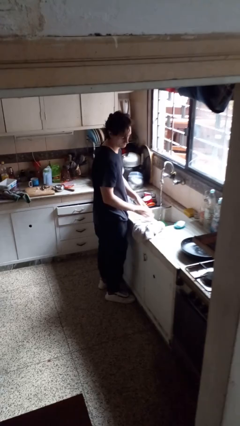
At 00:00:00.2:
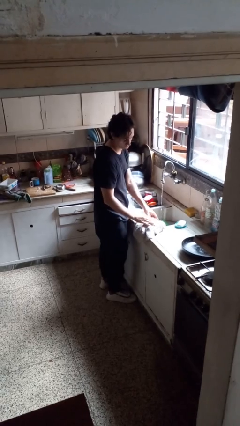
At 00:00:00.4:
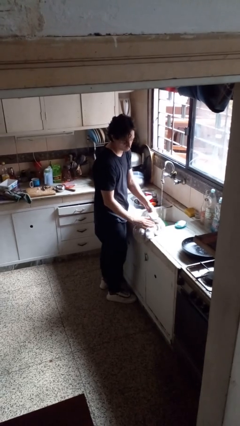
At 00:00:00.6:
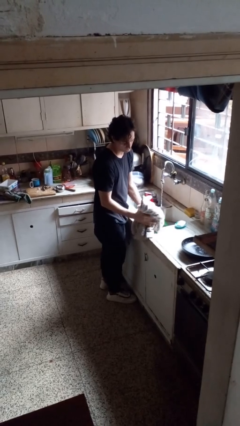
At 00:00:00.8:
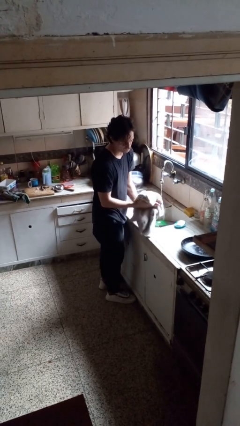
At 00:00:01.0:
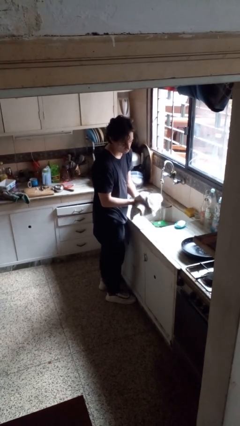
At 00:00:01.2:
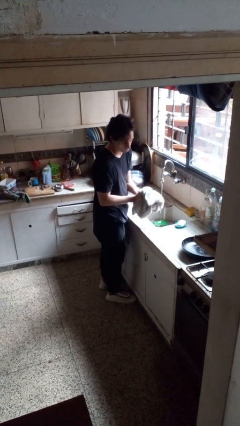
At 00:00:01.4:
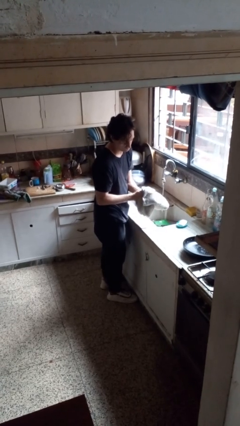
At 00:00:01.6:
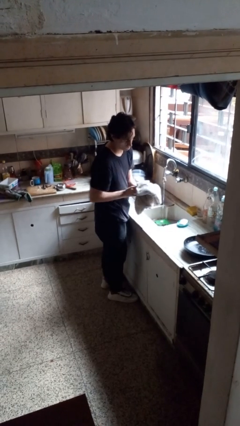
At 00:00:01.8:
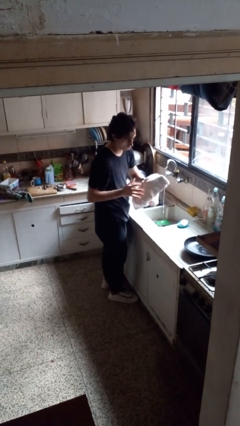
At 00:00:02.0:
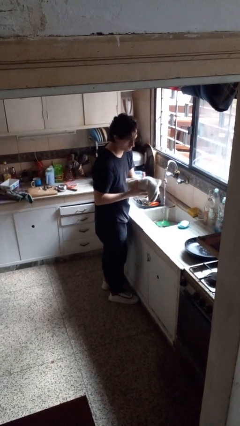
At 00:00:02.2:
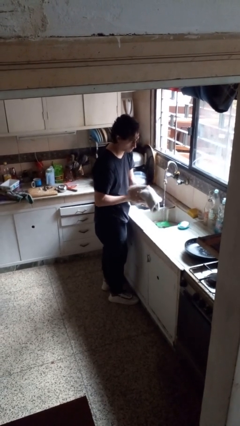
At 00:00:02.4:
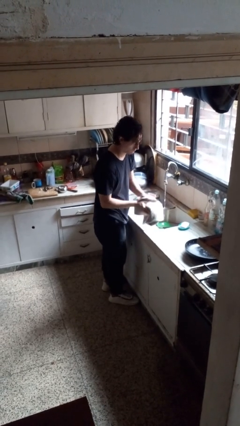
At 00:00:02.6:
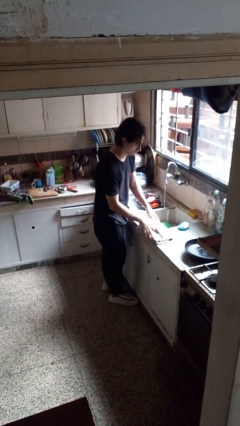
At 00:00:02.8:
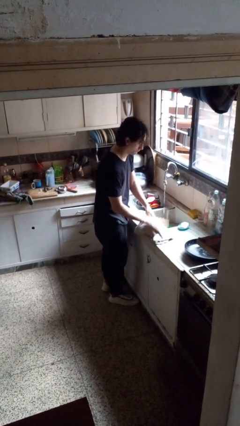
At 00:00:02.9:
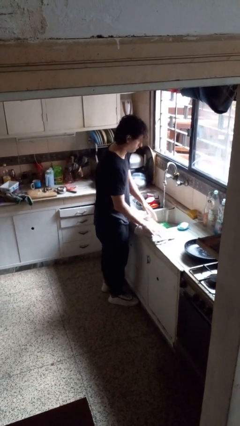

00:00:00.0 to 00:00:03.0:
person dries hands with towel

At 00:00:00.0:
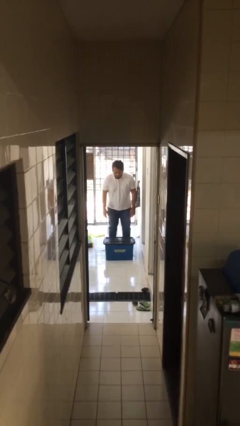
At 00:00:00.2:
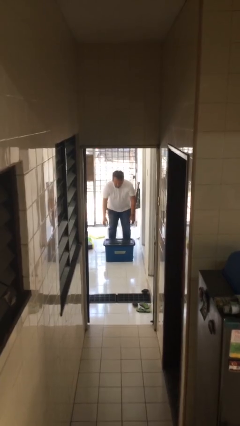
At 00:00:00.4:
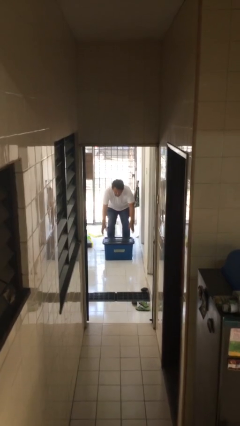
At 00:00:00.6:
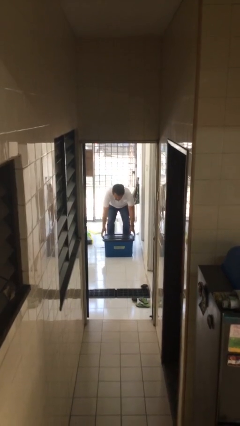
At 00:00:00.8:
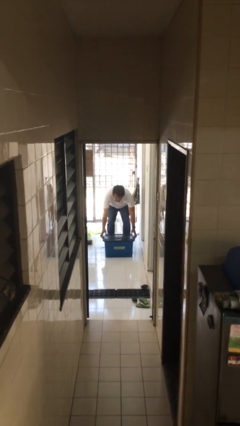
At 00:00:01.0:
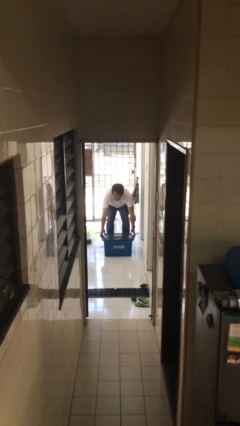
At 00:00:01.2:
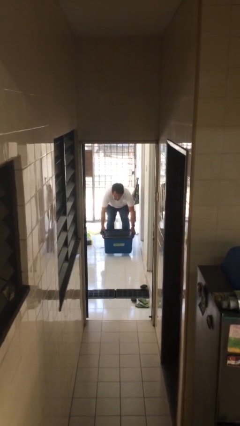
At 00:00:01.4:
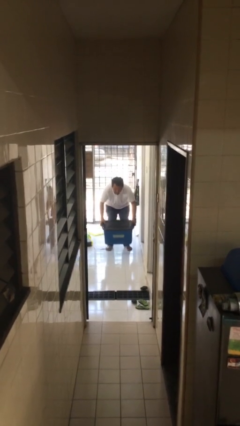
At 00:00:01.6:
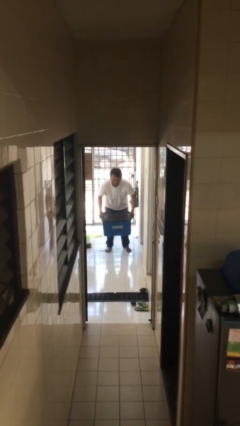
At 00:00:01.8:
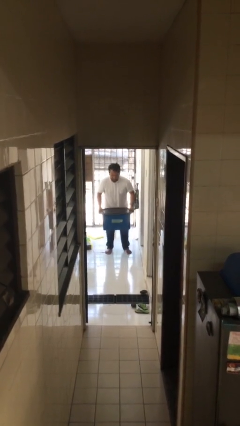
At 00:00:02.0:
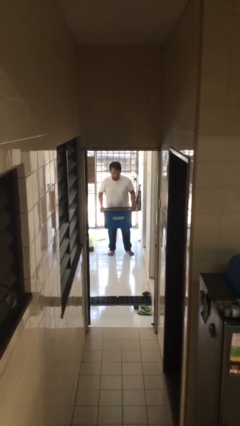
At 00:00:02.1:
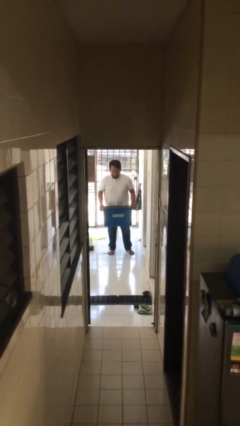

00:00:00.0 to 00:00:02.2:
person picks up object from floor

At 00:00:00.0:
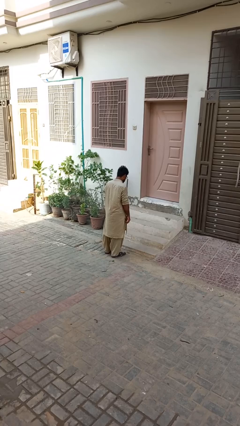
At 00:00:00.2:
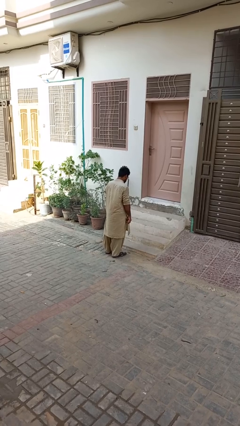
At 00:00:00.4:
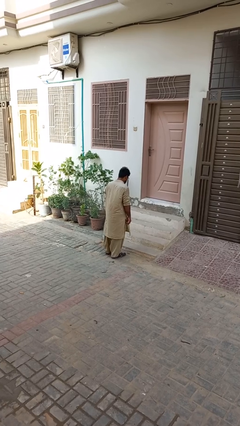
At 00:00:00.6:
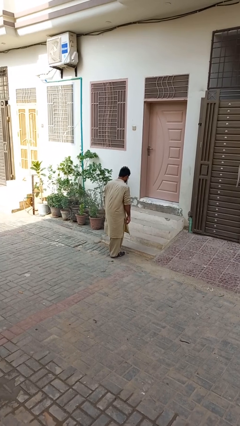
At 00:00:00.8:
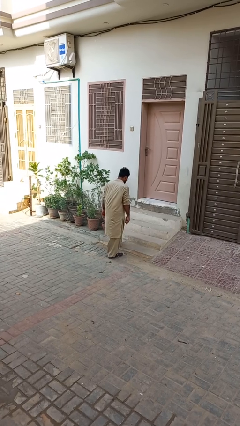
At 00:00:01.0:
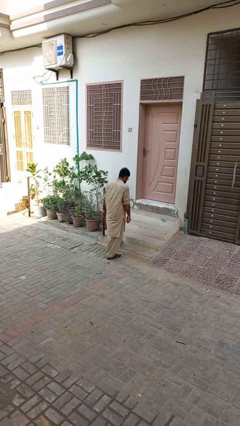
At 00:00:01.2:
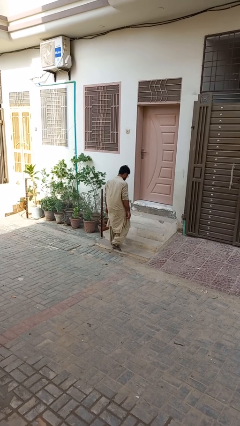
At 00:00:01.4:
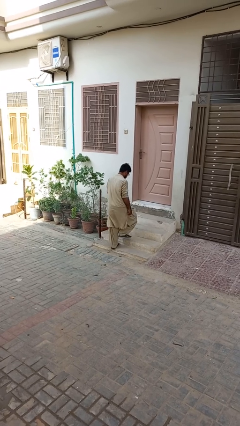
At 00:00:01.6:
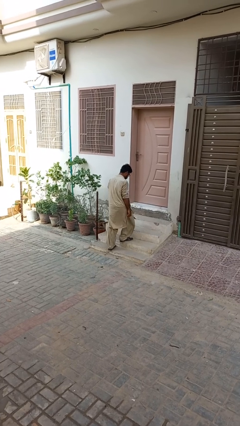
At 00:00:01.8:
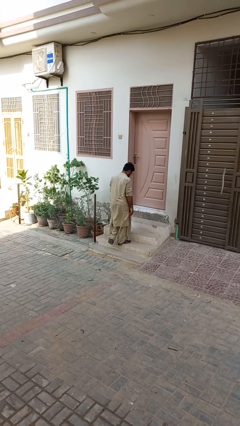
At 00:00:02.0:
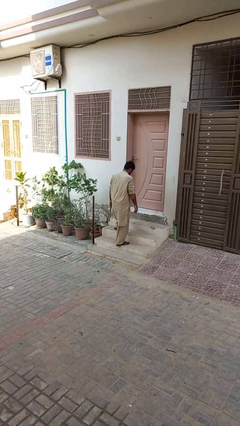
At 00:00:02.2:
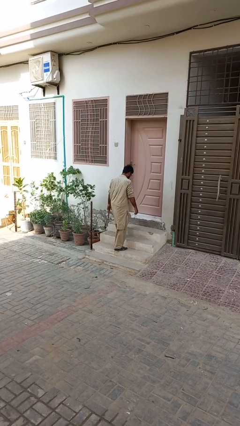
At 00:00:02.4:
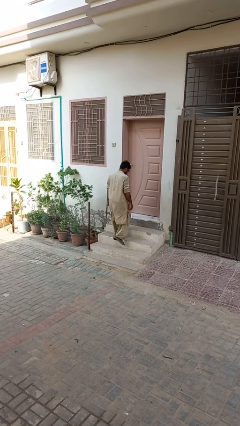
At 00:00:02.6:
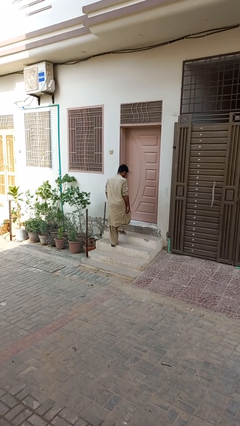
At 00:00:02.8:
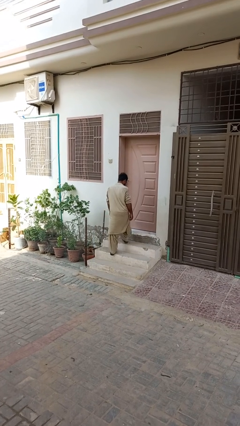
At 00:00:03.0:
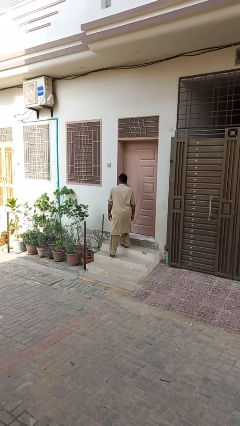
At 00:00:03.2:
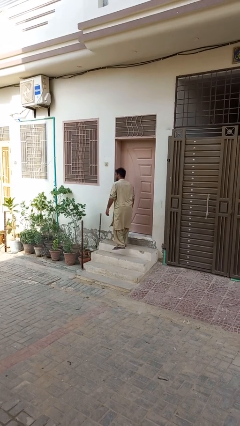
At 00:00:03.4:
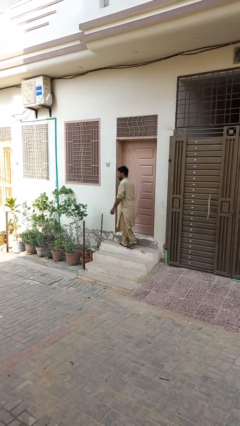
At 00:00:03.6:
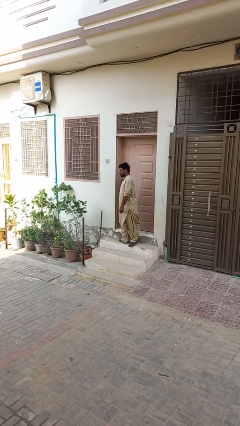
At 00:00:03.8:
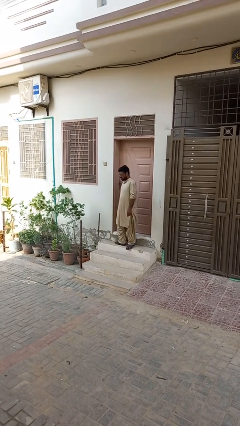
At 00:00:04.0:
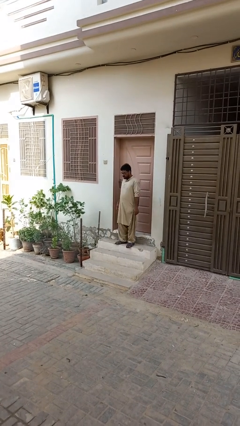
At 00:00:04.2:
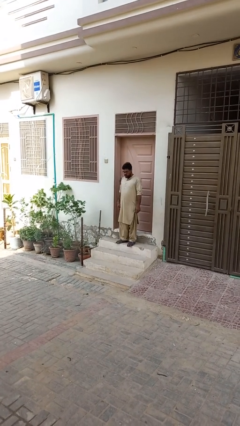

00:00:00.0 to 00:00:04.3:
person climbs up stairs

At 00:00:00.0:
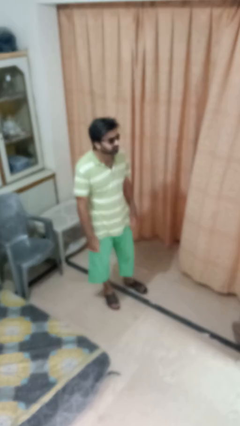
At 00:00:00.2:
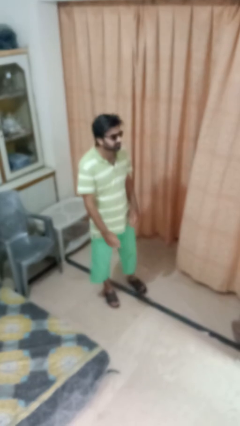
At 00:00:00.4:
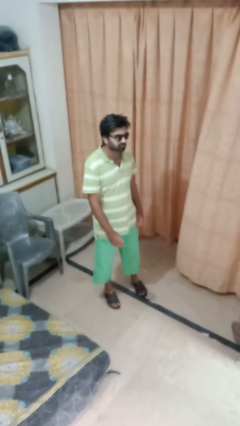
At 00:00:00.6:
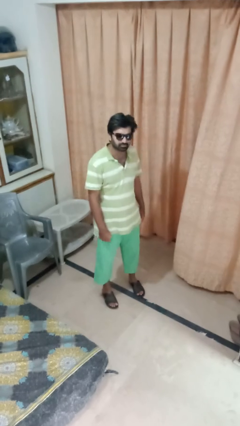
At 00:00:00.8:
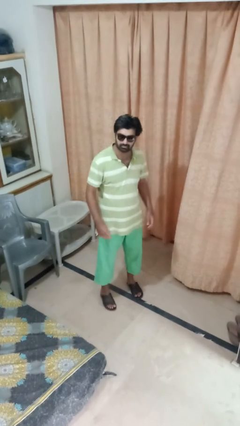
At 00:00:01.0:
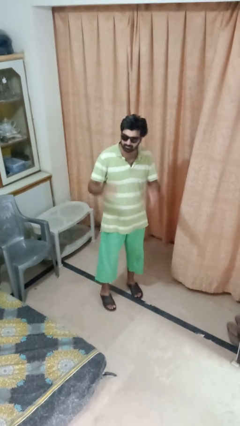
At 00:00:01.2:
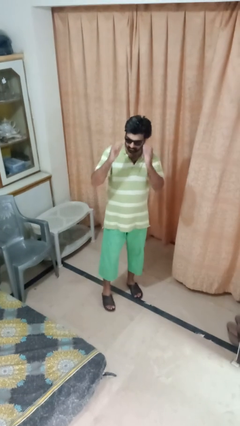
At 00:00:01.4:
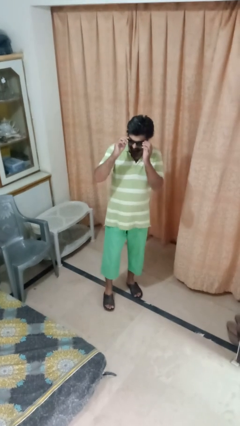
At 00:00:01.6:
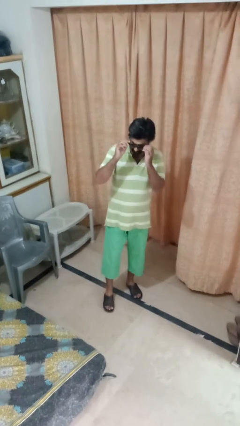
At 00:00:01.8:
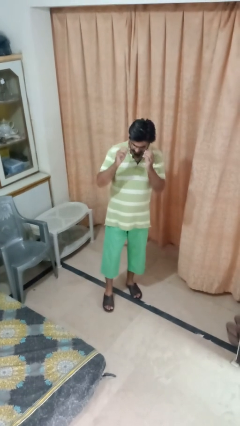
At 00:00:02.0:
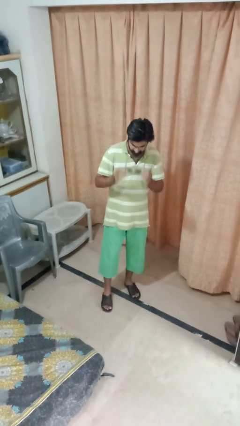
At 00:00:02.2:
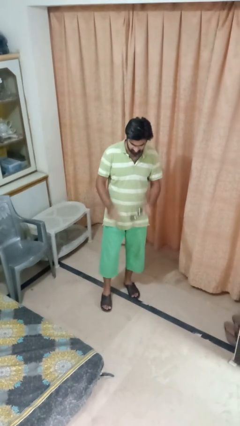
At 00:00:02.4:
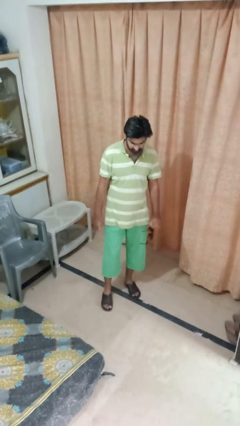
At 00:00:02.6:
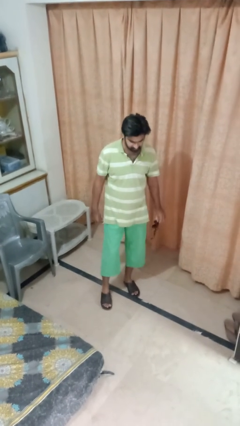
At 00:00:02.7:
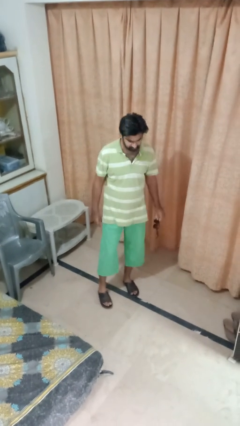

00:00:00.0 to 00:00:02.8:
person takes off sunglasses

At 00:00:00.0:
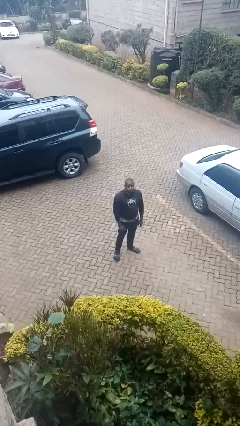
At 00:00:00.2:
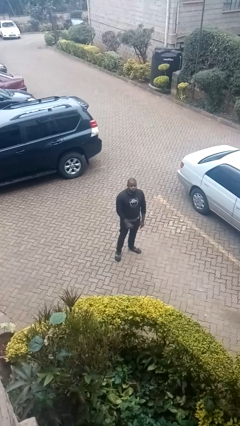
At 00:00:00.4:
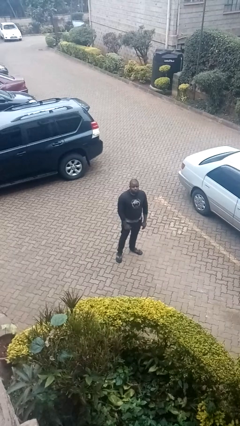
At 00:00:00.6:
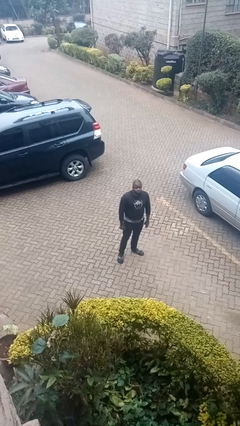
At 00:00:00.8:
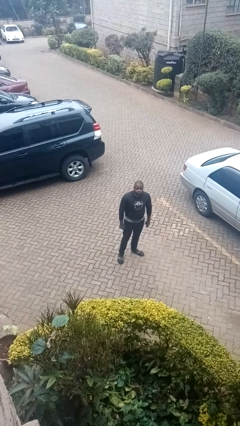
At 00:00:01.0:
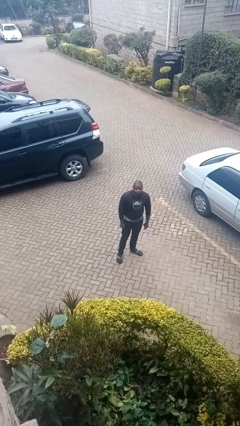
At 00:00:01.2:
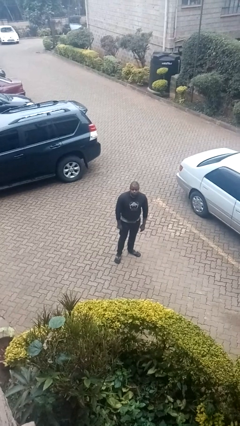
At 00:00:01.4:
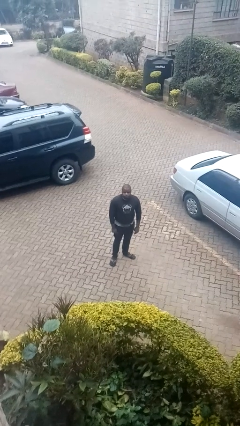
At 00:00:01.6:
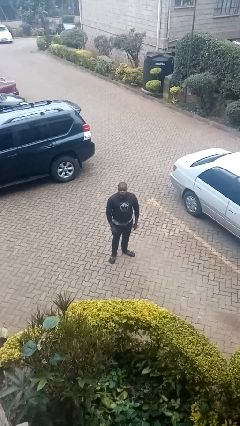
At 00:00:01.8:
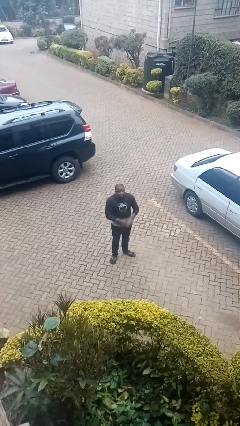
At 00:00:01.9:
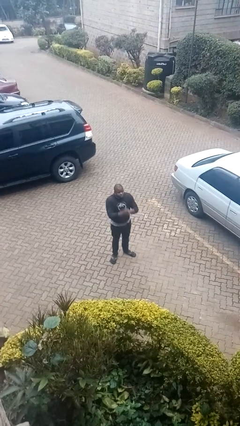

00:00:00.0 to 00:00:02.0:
person blows into hands

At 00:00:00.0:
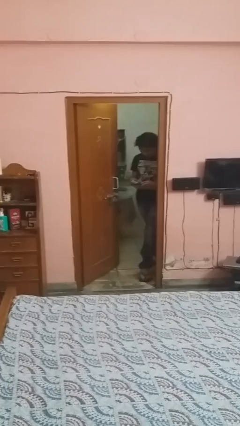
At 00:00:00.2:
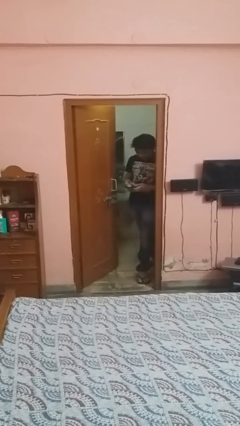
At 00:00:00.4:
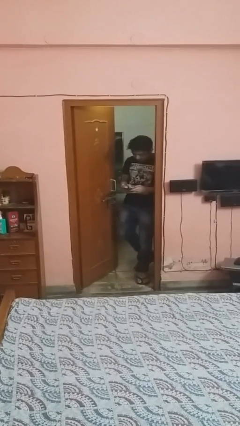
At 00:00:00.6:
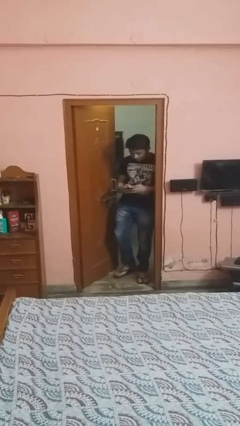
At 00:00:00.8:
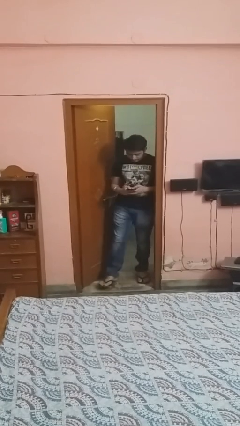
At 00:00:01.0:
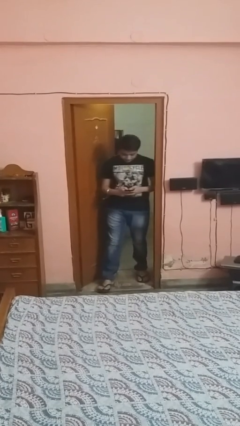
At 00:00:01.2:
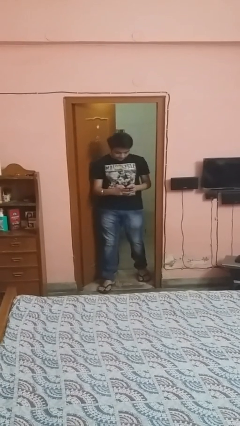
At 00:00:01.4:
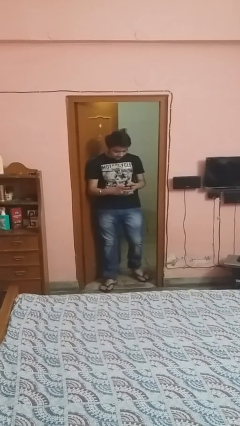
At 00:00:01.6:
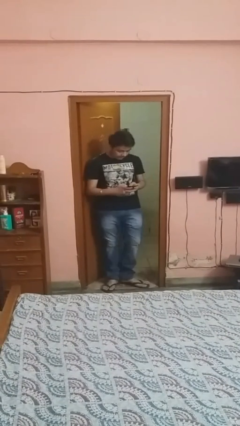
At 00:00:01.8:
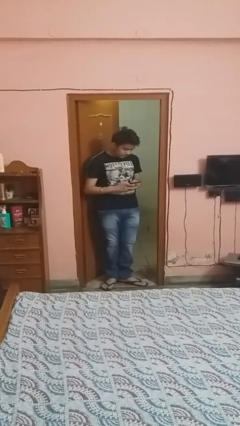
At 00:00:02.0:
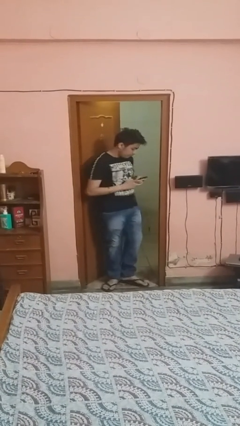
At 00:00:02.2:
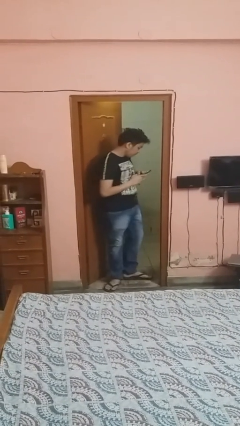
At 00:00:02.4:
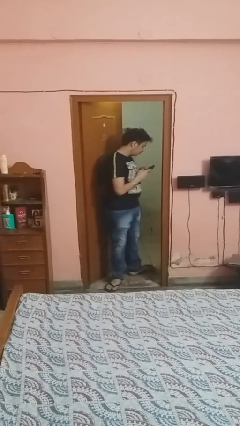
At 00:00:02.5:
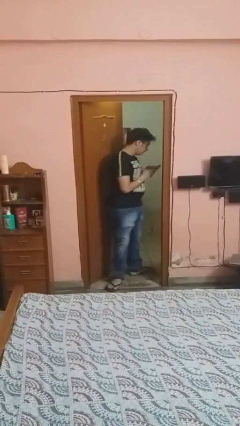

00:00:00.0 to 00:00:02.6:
person enters scene through structure

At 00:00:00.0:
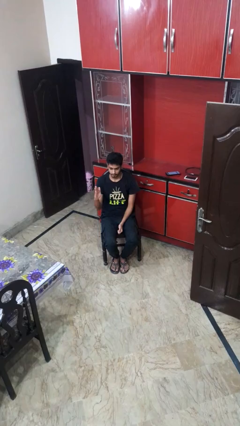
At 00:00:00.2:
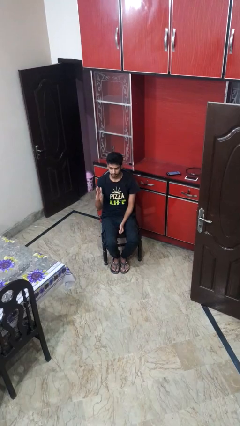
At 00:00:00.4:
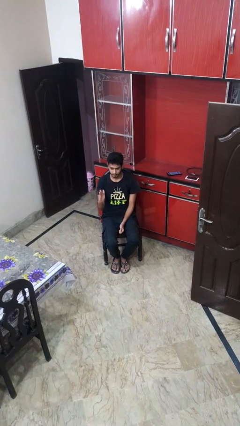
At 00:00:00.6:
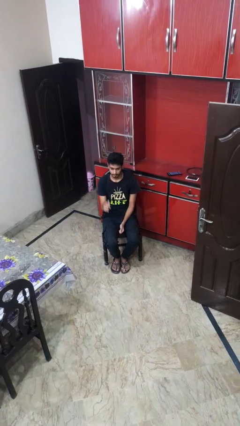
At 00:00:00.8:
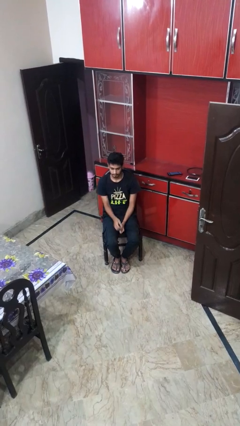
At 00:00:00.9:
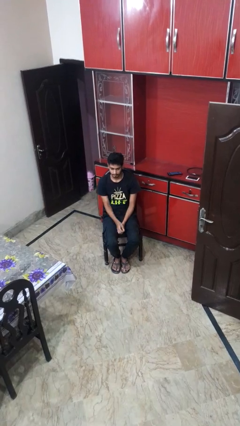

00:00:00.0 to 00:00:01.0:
person gestures swipe right
